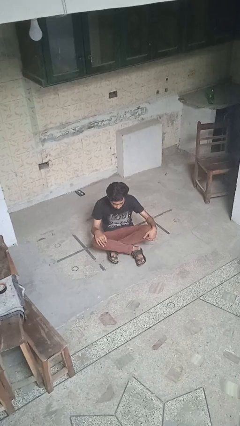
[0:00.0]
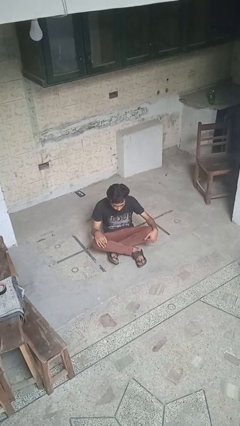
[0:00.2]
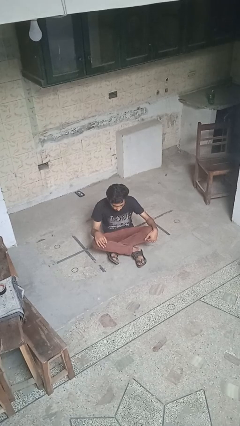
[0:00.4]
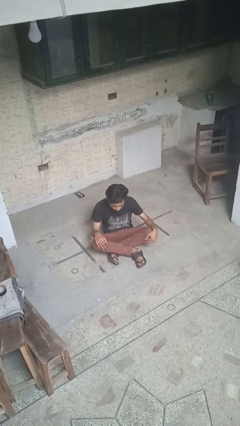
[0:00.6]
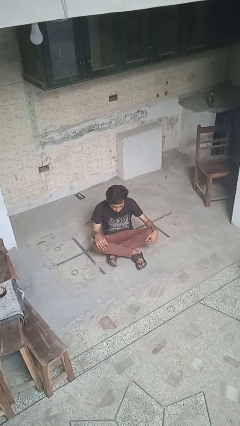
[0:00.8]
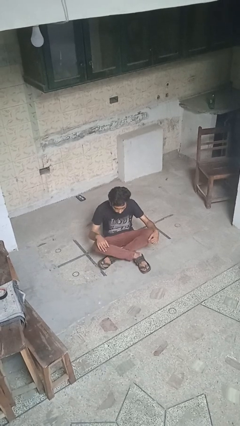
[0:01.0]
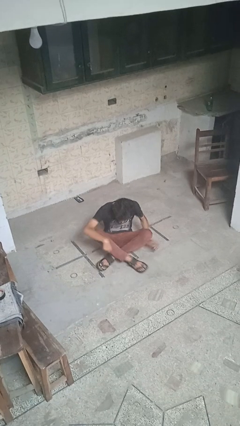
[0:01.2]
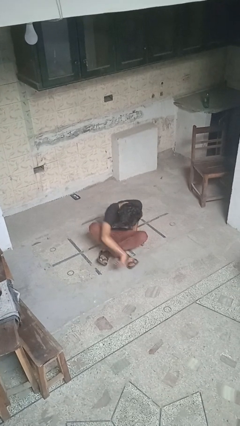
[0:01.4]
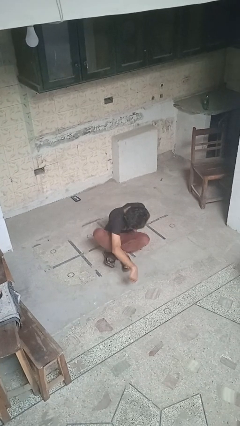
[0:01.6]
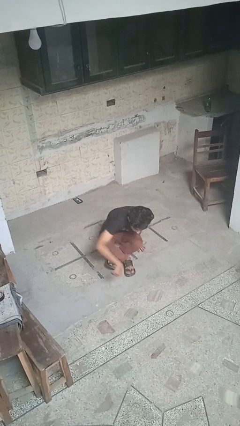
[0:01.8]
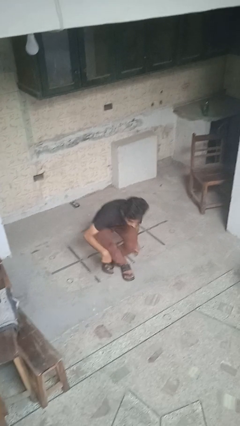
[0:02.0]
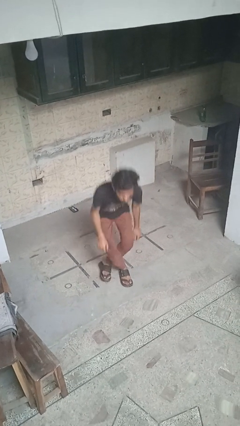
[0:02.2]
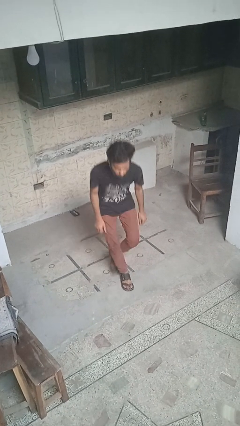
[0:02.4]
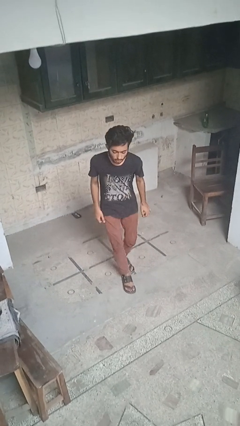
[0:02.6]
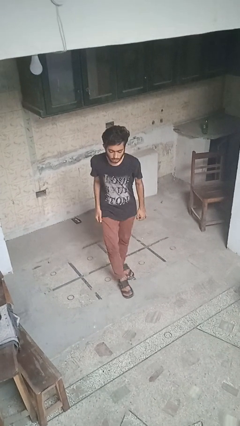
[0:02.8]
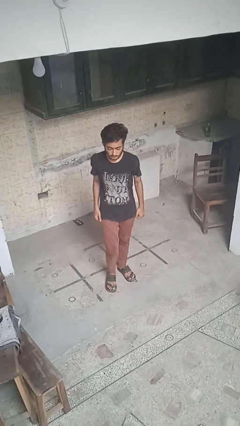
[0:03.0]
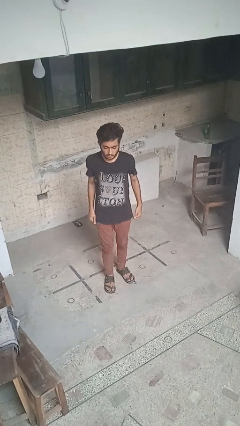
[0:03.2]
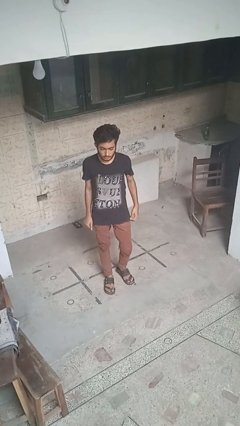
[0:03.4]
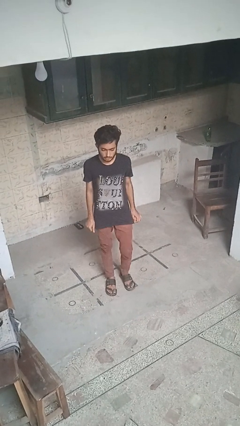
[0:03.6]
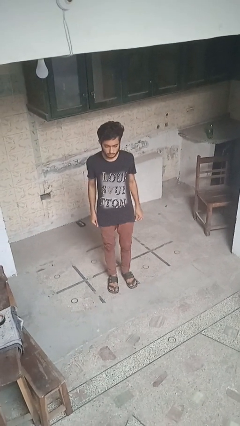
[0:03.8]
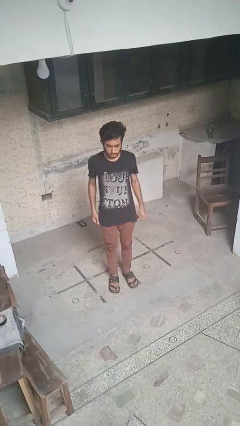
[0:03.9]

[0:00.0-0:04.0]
person stands up from floor

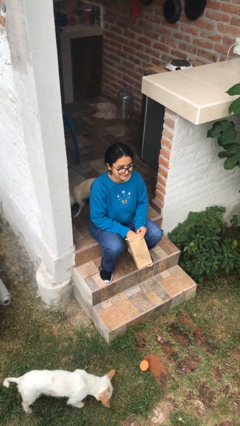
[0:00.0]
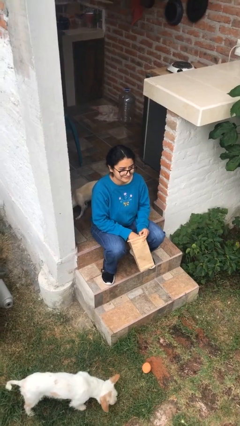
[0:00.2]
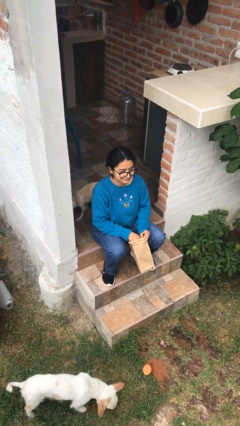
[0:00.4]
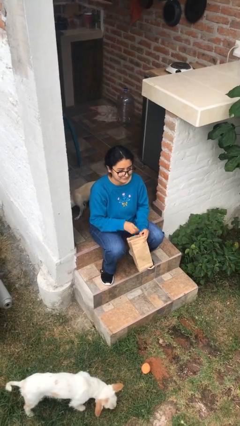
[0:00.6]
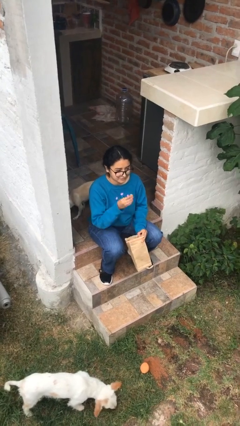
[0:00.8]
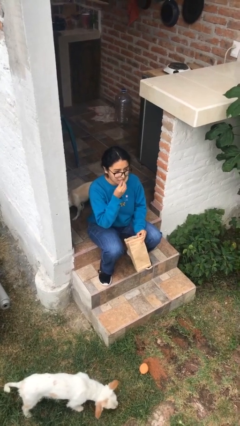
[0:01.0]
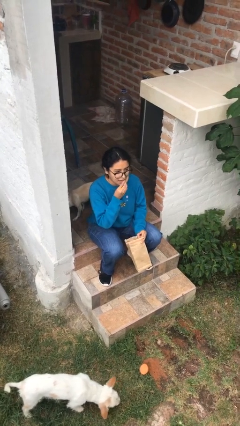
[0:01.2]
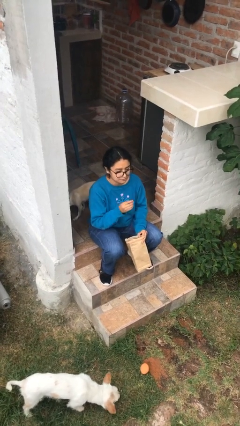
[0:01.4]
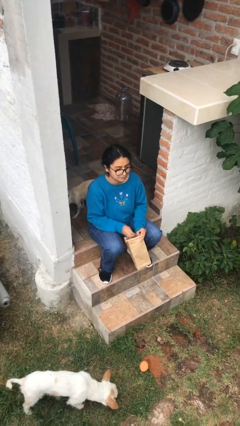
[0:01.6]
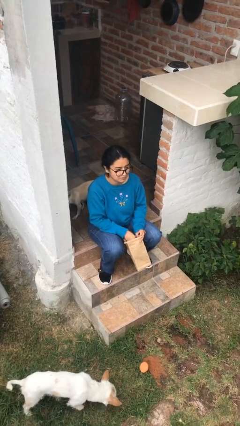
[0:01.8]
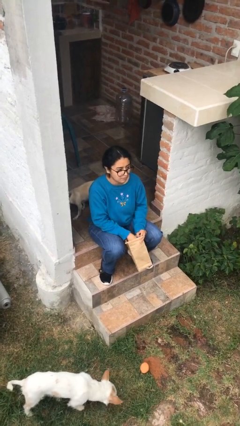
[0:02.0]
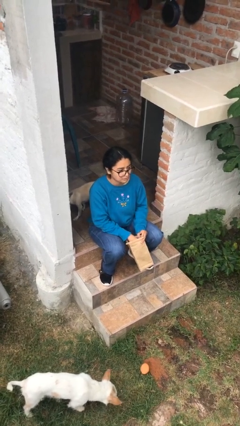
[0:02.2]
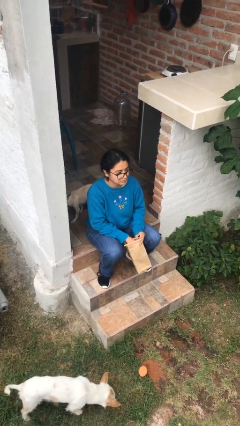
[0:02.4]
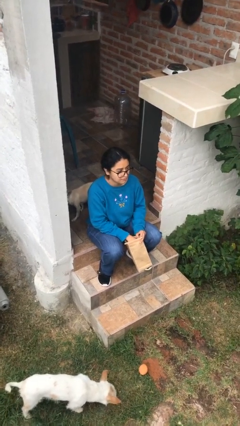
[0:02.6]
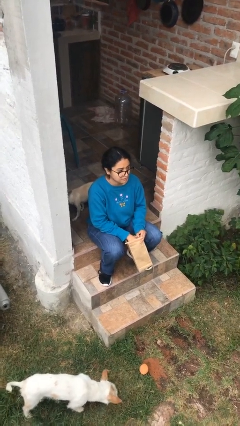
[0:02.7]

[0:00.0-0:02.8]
person eats snack from bag

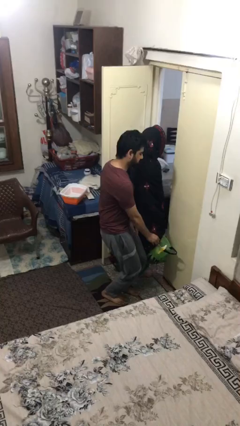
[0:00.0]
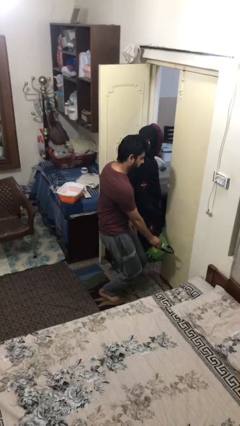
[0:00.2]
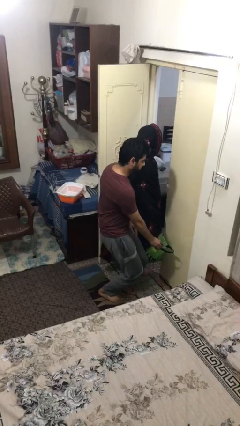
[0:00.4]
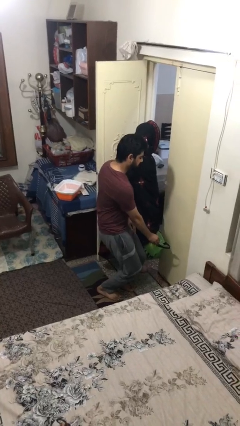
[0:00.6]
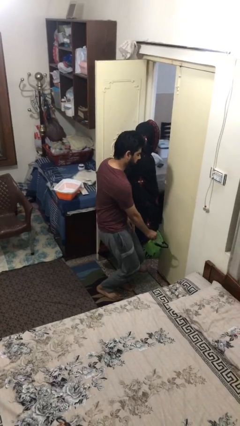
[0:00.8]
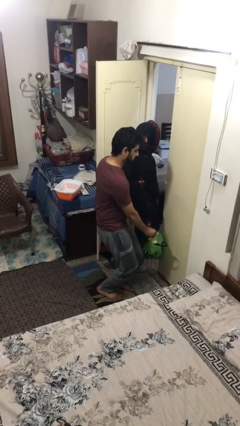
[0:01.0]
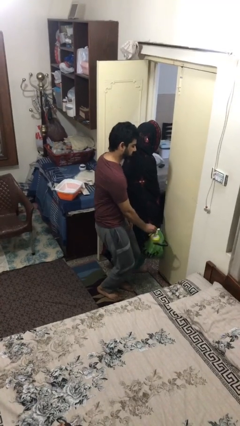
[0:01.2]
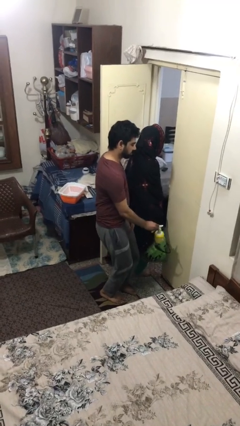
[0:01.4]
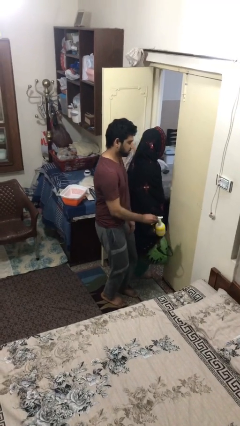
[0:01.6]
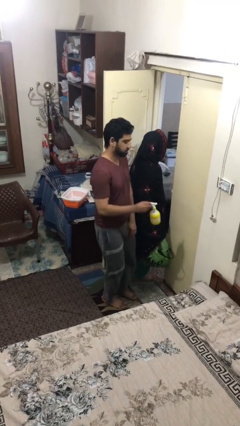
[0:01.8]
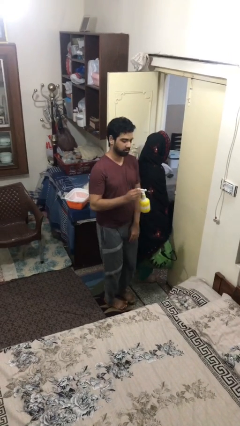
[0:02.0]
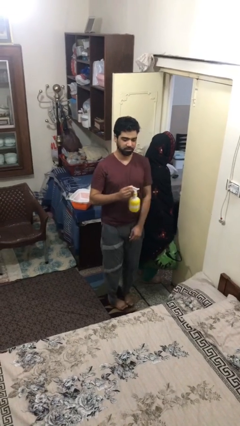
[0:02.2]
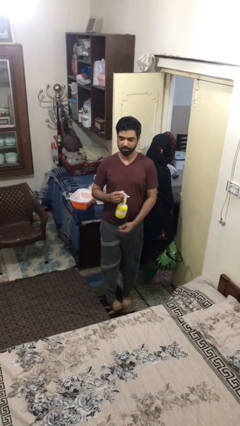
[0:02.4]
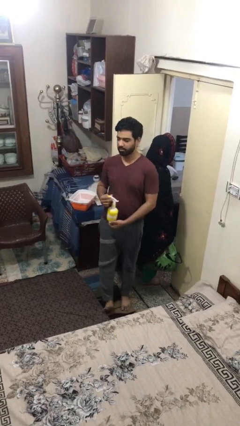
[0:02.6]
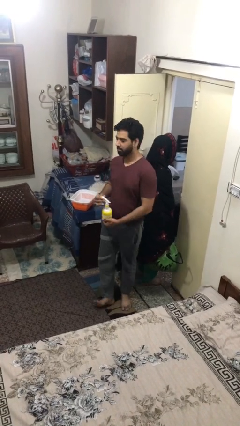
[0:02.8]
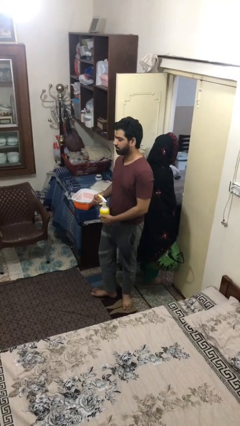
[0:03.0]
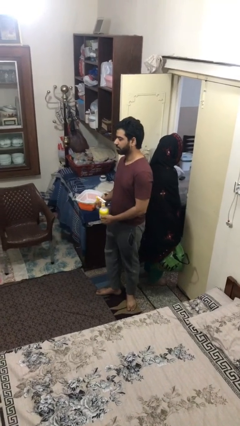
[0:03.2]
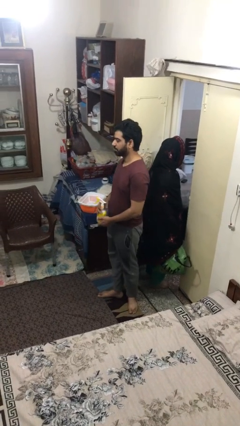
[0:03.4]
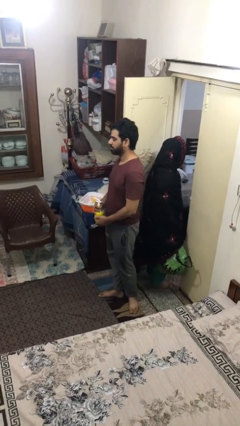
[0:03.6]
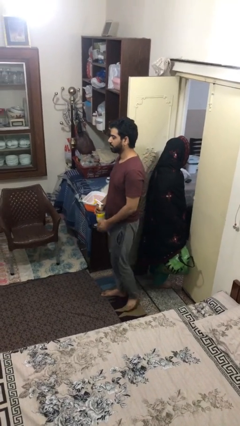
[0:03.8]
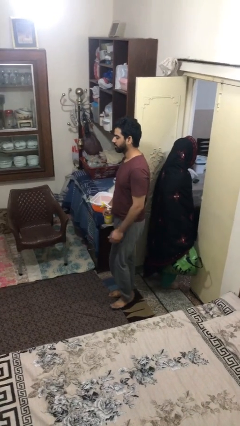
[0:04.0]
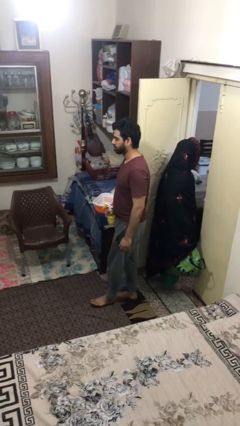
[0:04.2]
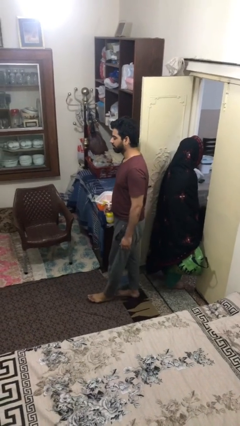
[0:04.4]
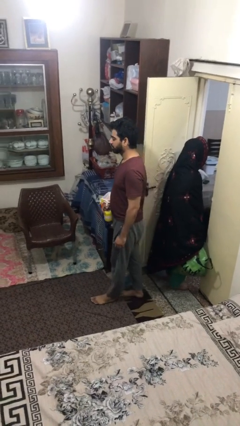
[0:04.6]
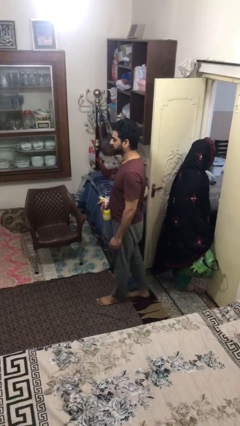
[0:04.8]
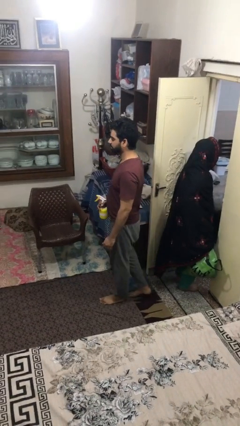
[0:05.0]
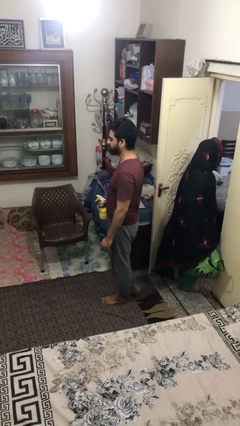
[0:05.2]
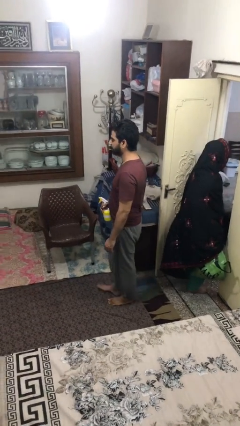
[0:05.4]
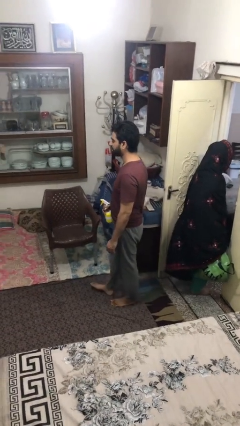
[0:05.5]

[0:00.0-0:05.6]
person steals object from person

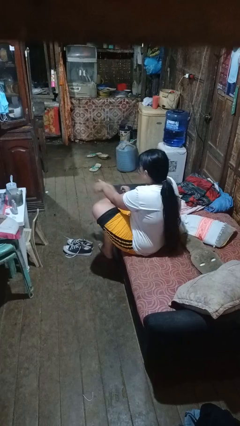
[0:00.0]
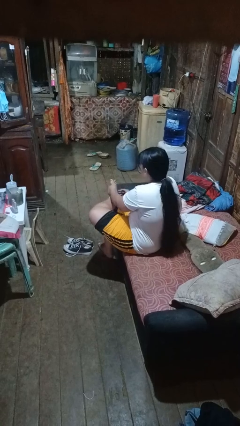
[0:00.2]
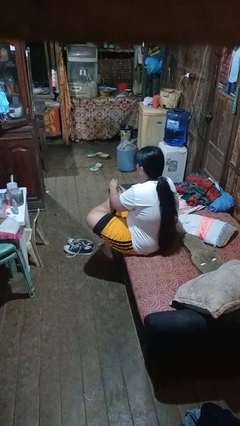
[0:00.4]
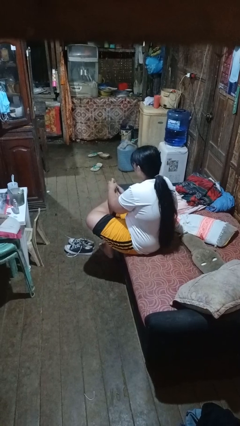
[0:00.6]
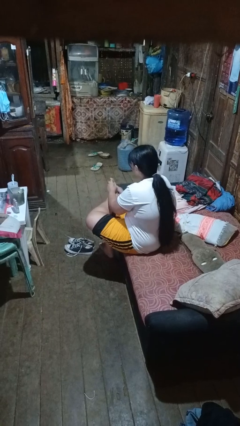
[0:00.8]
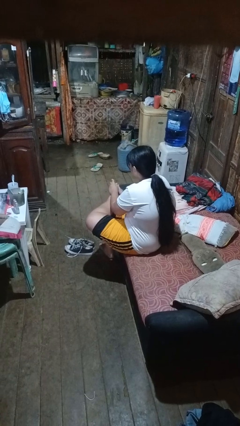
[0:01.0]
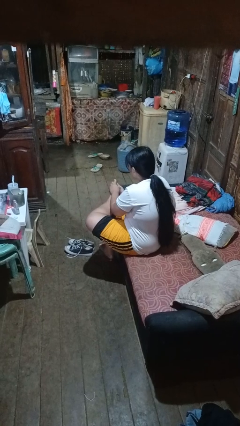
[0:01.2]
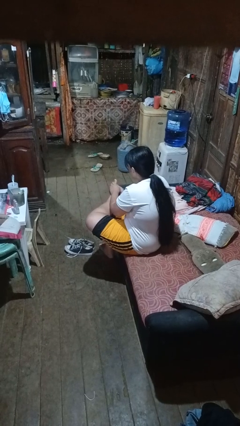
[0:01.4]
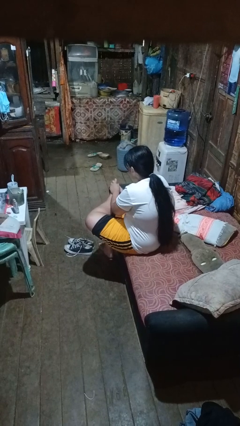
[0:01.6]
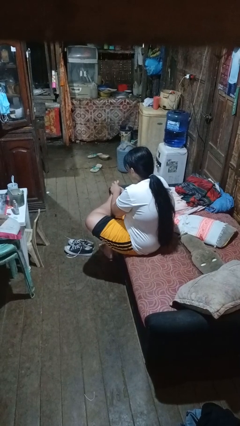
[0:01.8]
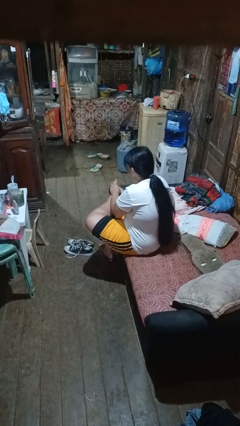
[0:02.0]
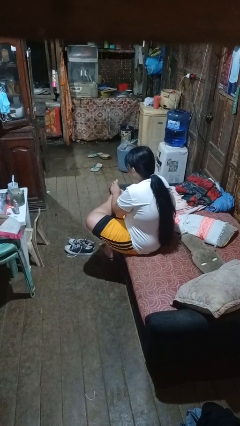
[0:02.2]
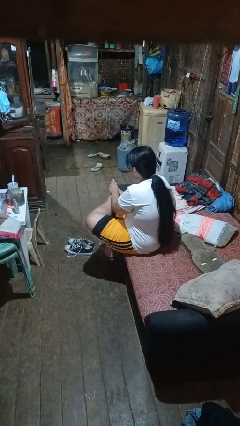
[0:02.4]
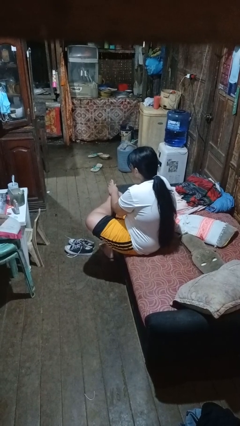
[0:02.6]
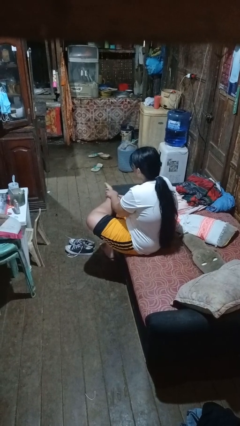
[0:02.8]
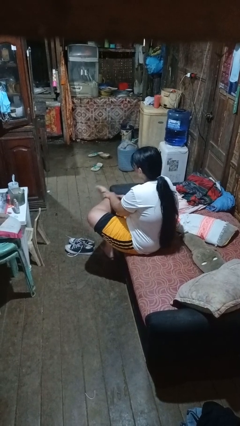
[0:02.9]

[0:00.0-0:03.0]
person rubs foot

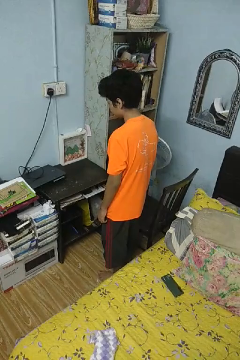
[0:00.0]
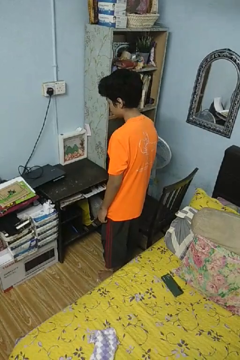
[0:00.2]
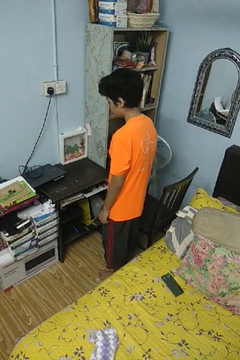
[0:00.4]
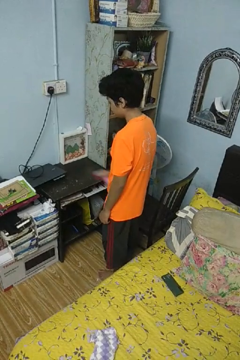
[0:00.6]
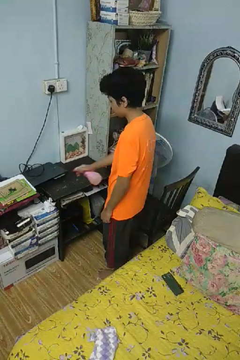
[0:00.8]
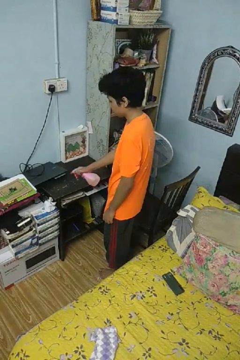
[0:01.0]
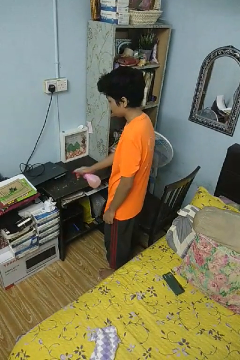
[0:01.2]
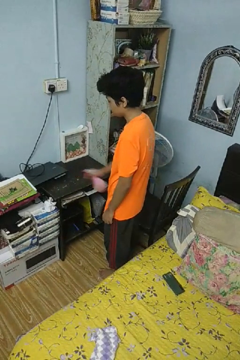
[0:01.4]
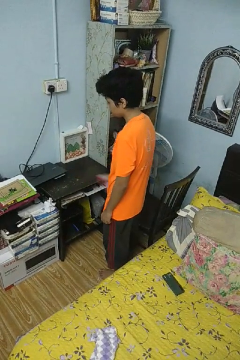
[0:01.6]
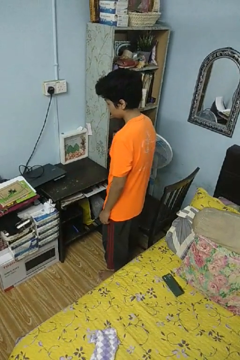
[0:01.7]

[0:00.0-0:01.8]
person sprays from bottle
